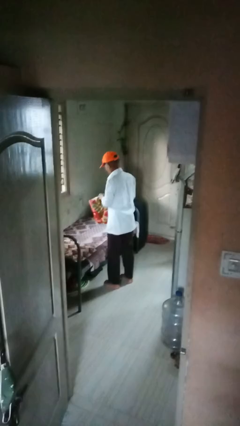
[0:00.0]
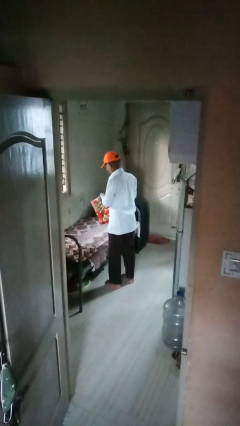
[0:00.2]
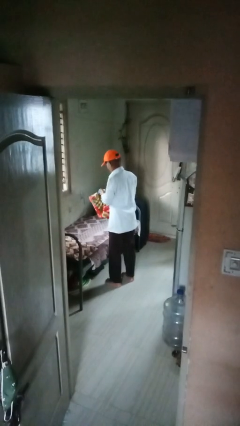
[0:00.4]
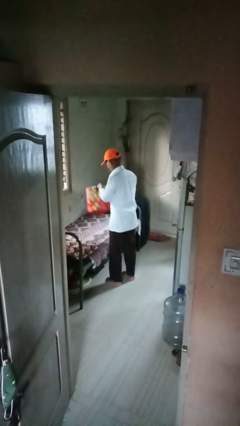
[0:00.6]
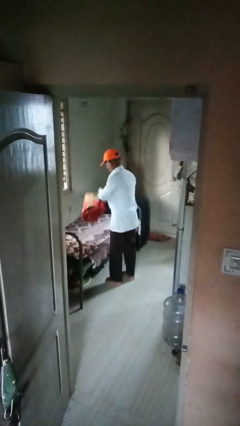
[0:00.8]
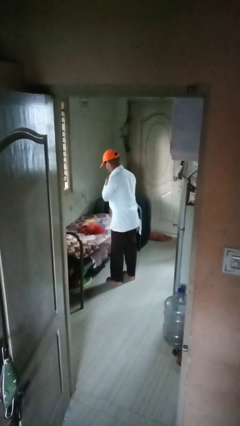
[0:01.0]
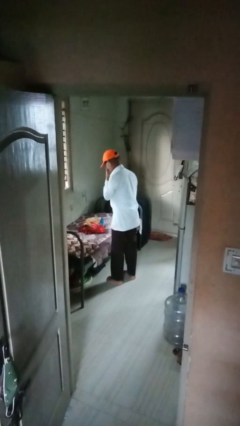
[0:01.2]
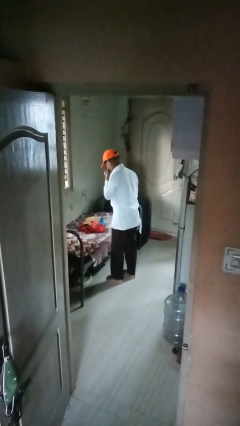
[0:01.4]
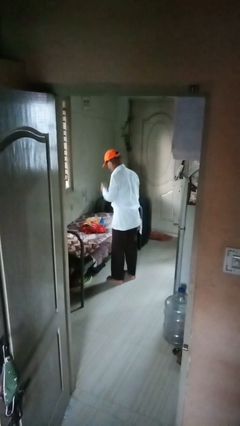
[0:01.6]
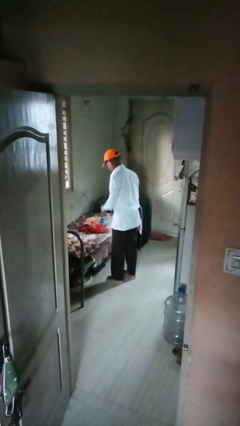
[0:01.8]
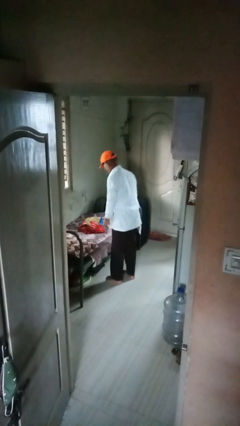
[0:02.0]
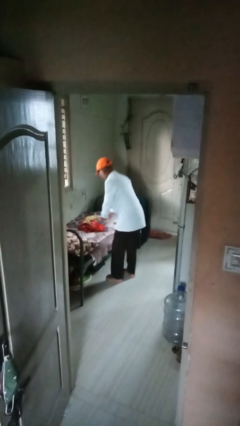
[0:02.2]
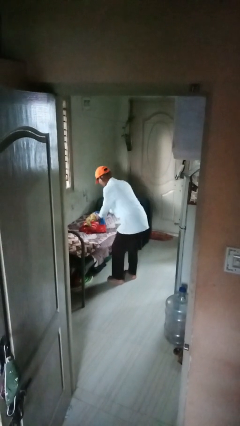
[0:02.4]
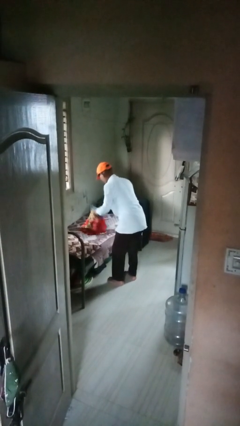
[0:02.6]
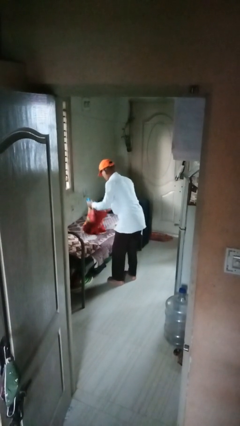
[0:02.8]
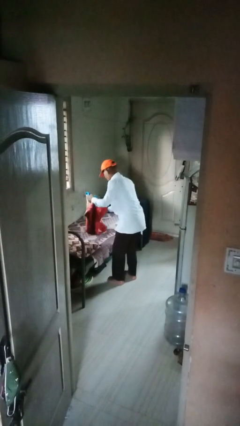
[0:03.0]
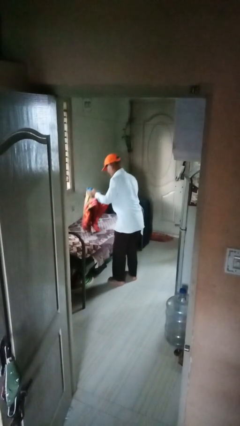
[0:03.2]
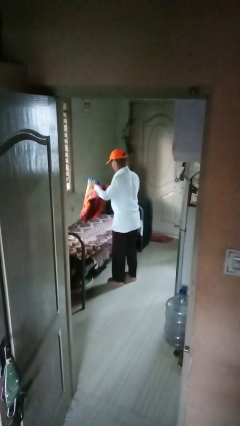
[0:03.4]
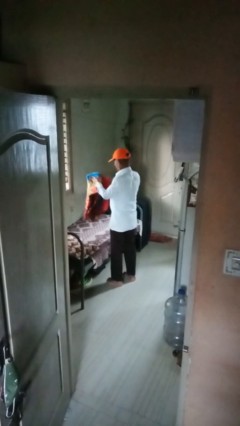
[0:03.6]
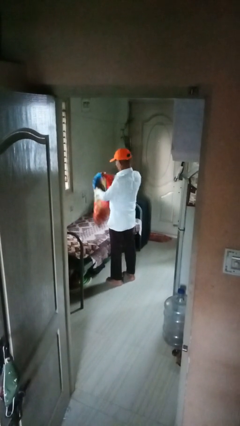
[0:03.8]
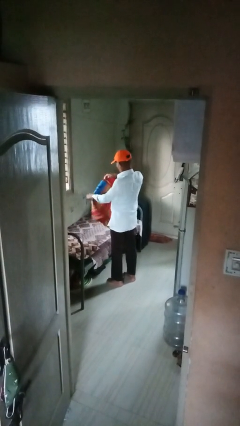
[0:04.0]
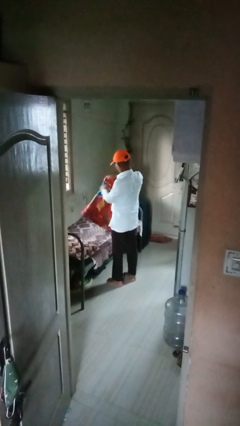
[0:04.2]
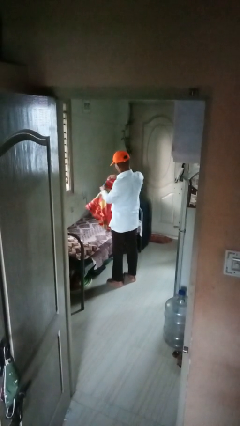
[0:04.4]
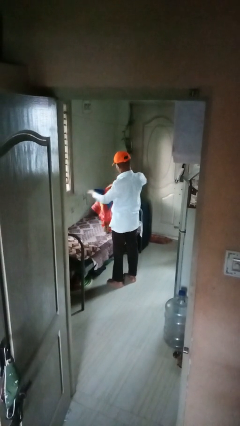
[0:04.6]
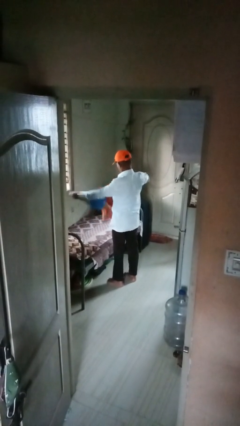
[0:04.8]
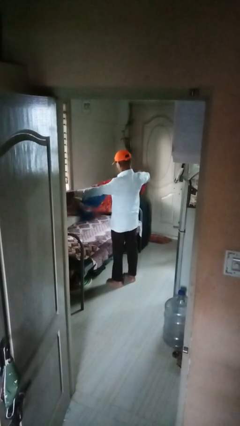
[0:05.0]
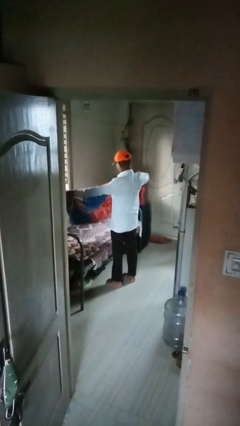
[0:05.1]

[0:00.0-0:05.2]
person unfolds blanket

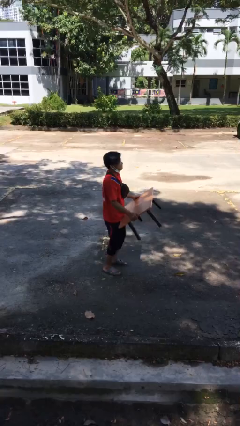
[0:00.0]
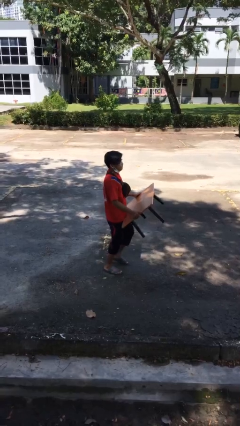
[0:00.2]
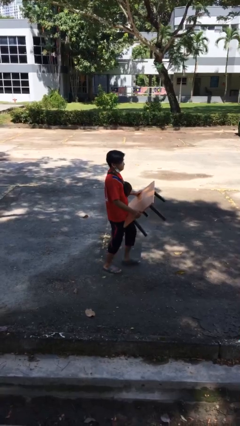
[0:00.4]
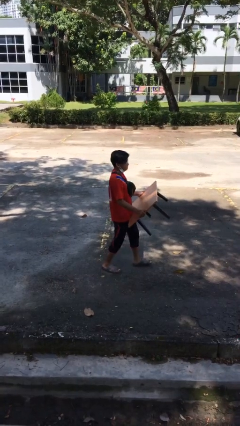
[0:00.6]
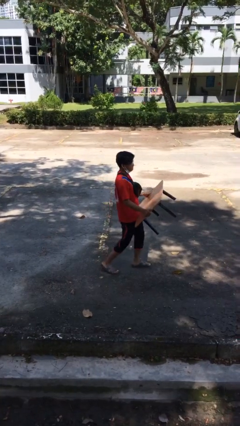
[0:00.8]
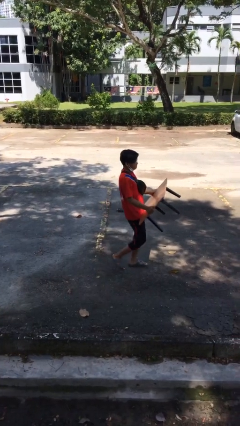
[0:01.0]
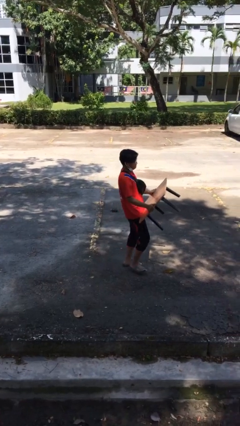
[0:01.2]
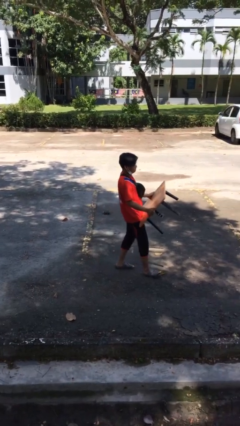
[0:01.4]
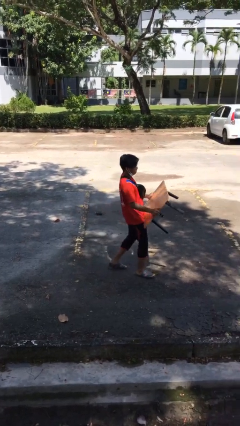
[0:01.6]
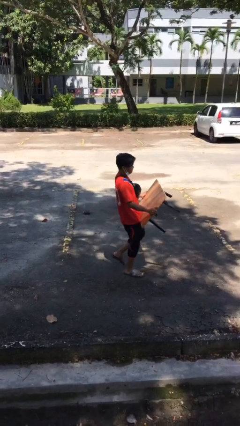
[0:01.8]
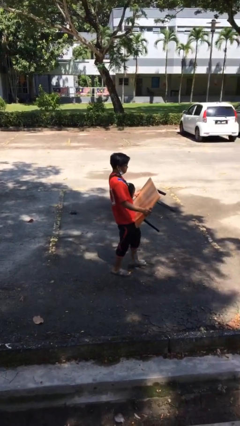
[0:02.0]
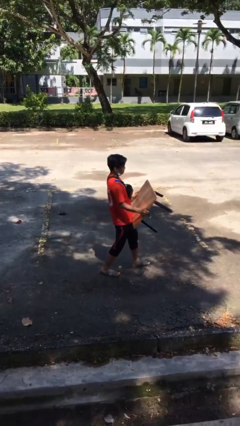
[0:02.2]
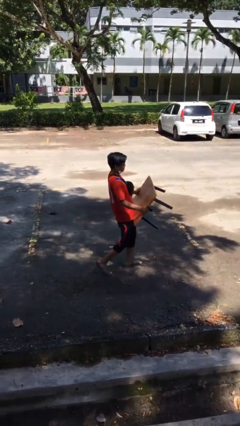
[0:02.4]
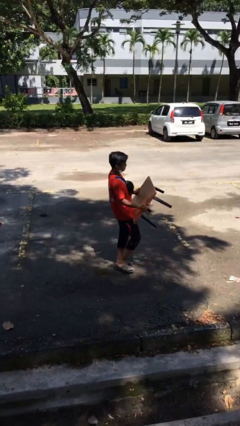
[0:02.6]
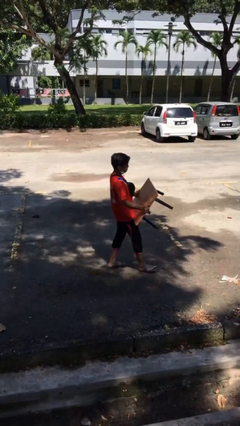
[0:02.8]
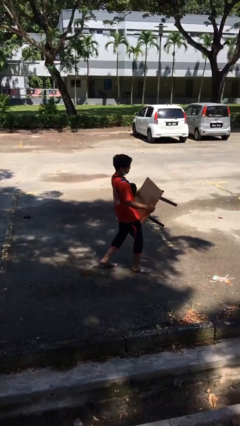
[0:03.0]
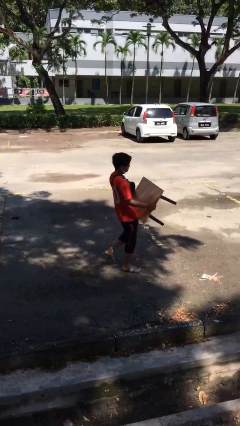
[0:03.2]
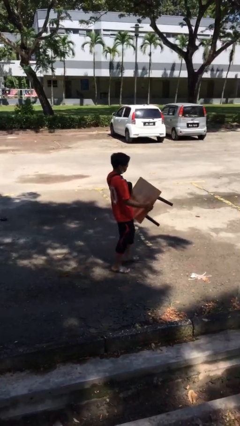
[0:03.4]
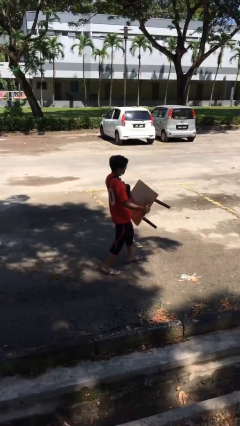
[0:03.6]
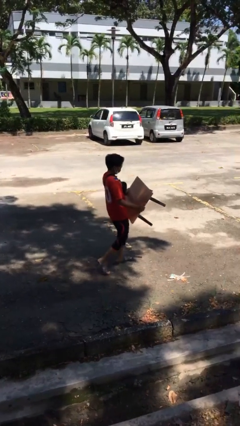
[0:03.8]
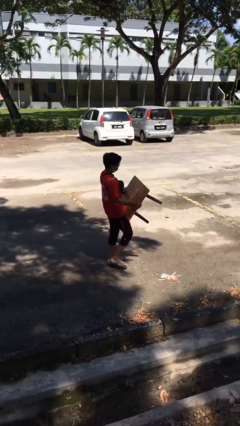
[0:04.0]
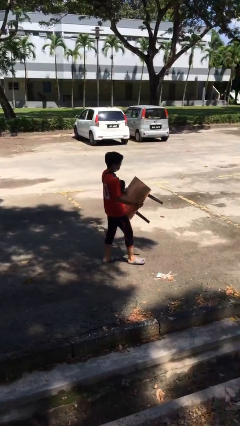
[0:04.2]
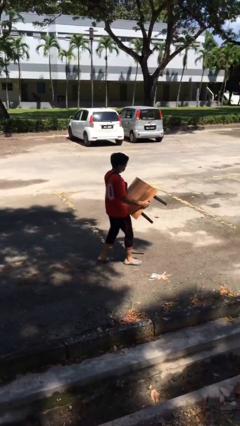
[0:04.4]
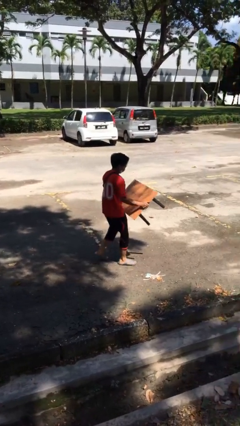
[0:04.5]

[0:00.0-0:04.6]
person carries heavy object

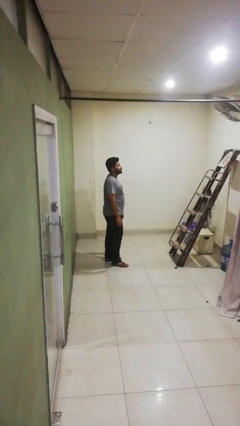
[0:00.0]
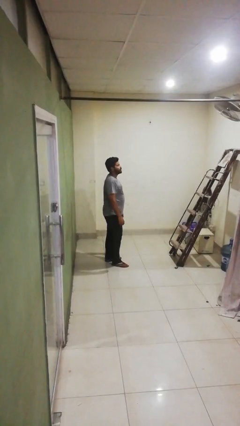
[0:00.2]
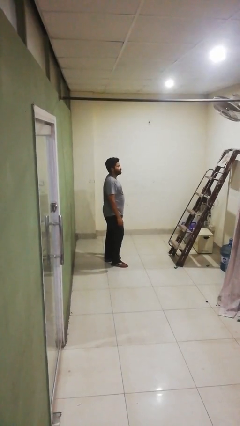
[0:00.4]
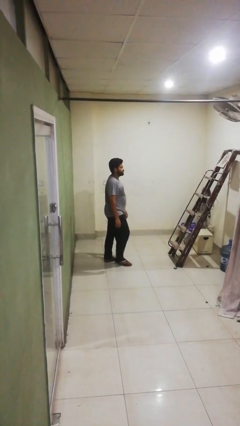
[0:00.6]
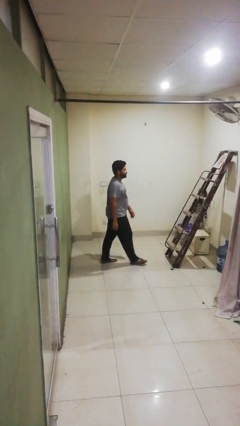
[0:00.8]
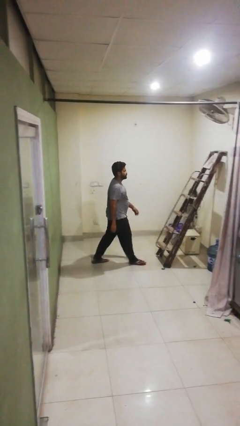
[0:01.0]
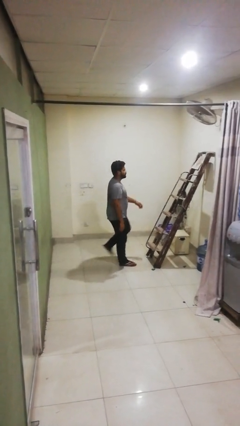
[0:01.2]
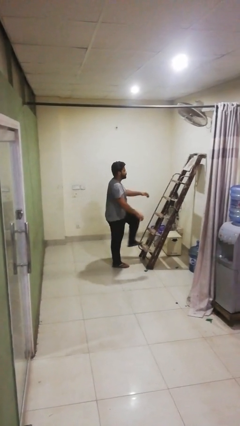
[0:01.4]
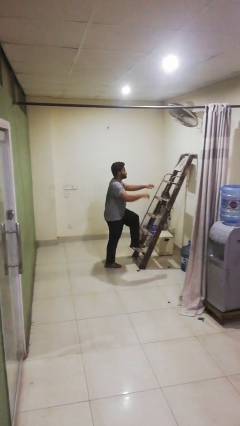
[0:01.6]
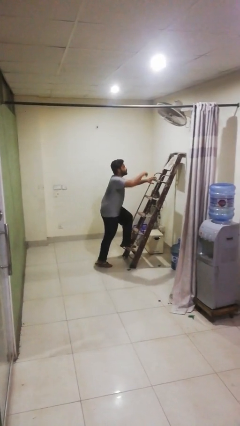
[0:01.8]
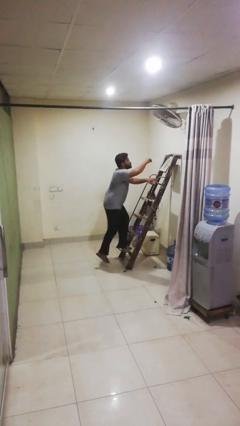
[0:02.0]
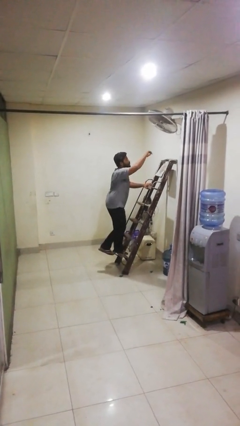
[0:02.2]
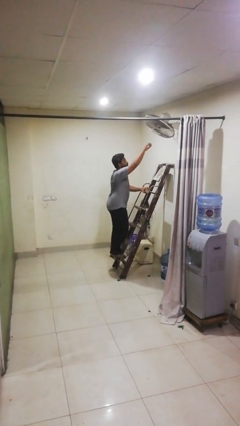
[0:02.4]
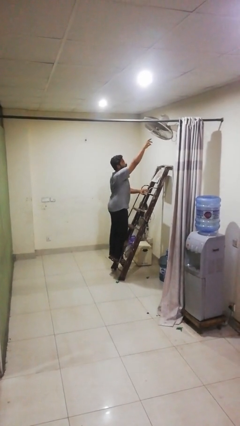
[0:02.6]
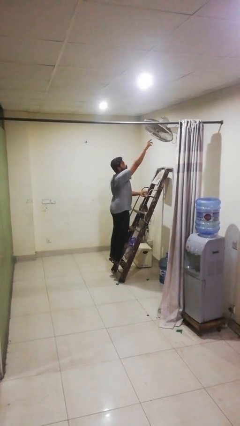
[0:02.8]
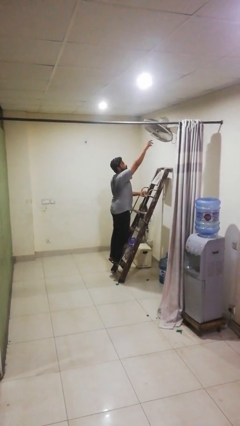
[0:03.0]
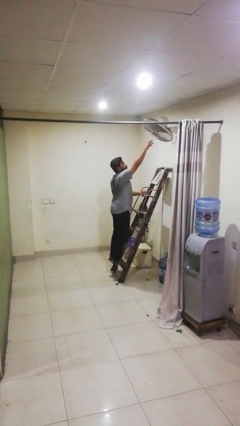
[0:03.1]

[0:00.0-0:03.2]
person climbs up ladder

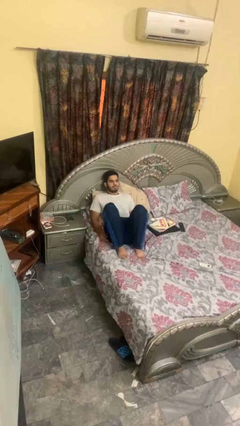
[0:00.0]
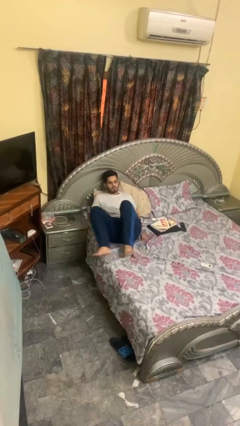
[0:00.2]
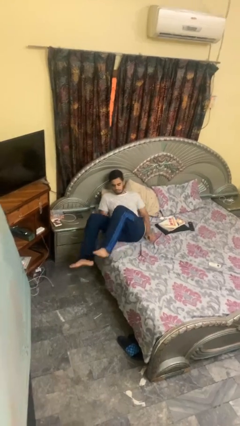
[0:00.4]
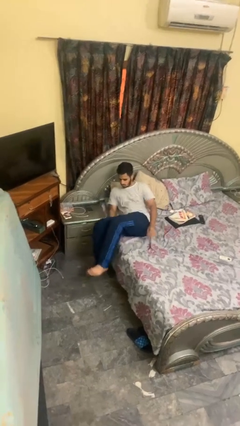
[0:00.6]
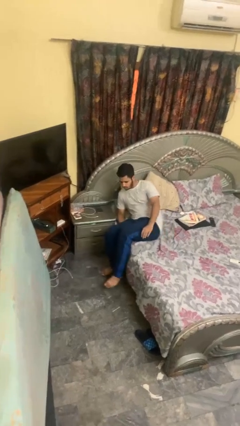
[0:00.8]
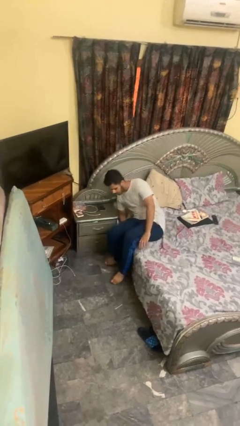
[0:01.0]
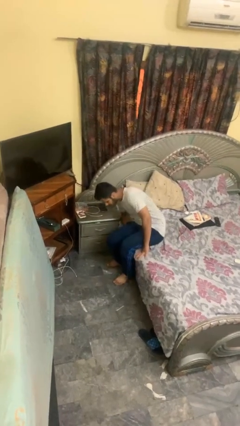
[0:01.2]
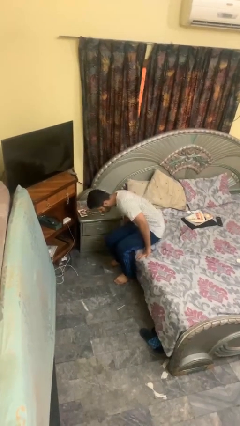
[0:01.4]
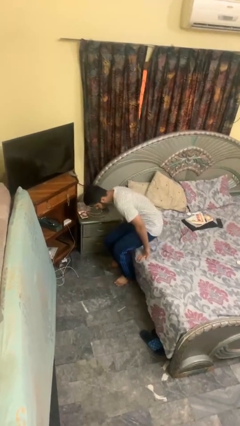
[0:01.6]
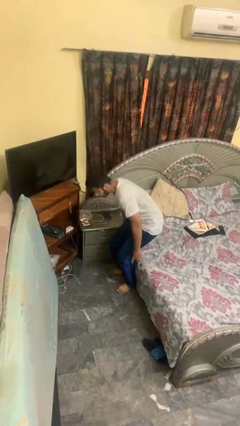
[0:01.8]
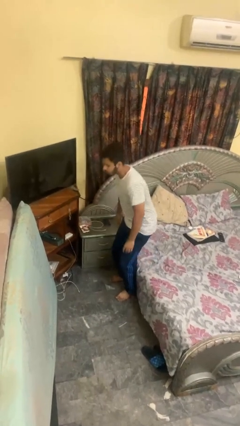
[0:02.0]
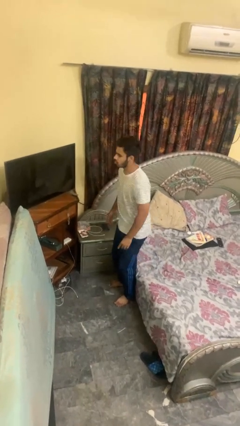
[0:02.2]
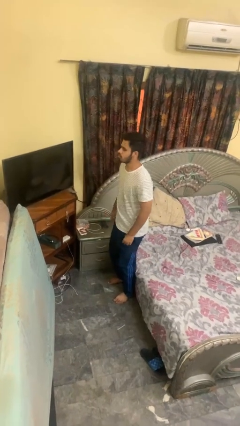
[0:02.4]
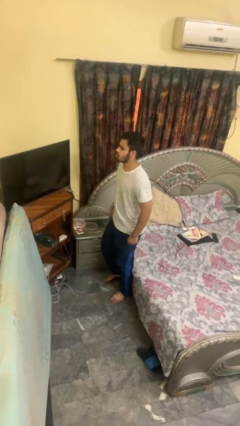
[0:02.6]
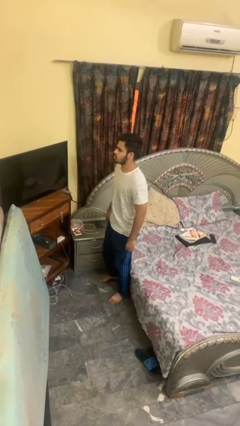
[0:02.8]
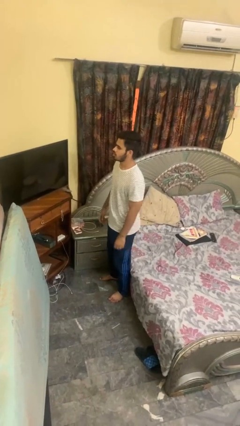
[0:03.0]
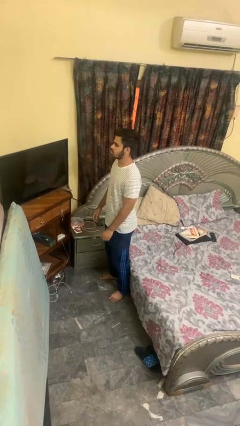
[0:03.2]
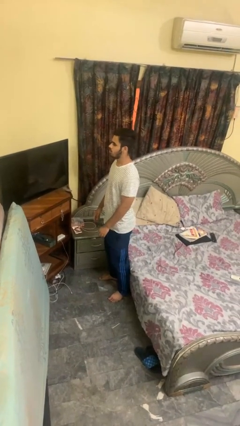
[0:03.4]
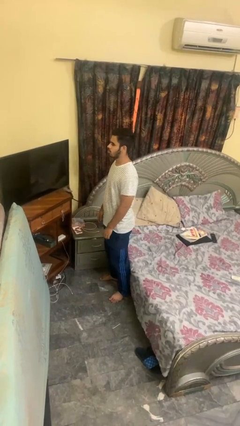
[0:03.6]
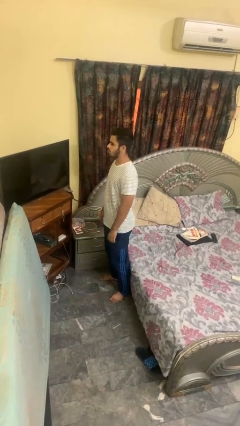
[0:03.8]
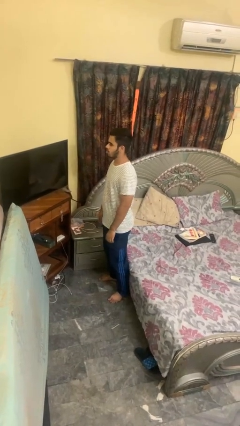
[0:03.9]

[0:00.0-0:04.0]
person stands up

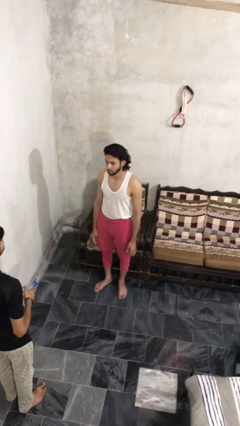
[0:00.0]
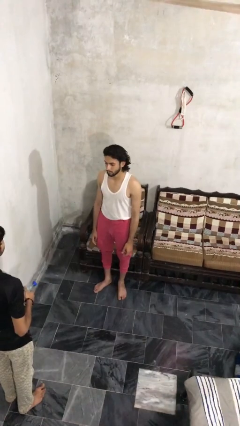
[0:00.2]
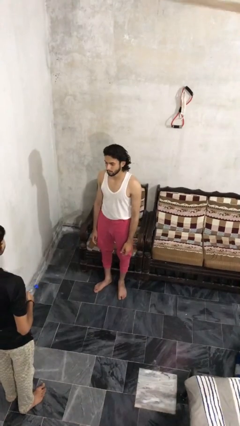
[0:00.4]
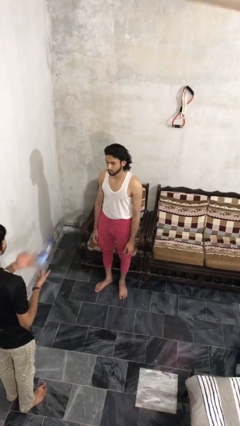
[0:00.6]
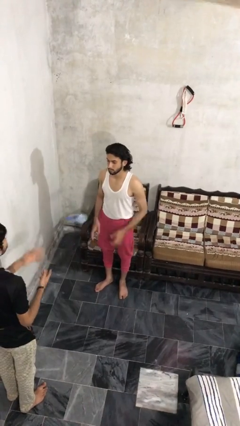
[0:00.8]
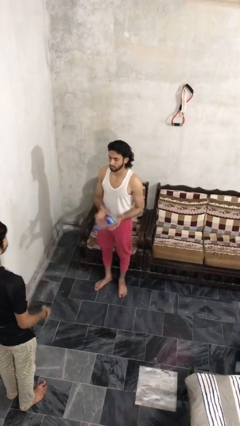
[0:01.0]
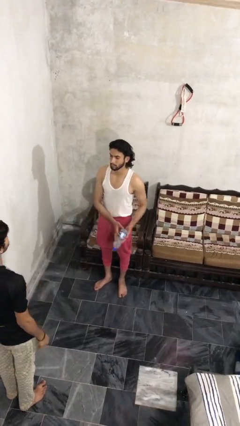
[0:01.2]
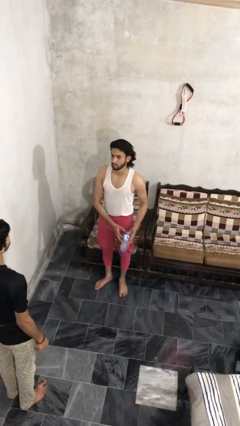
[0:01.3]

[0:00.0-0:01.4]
person catches object from person
